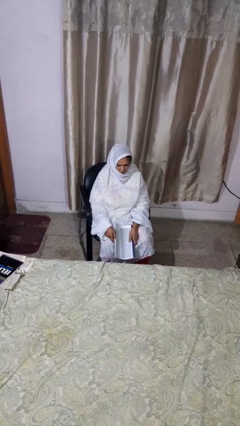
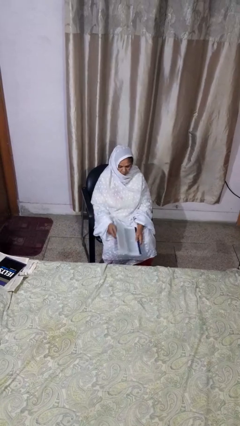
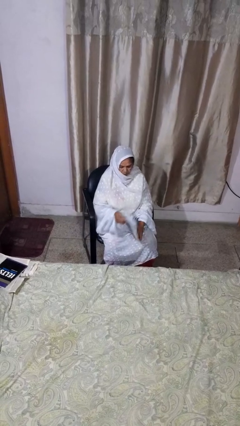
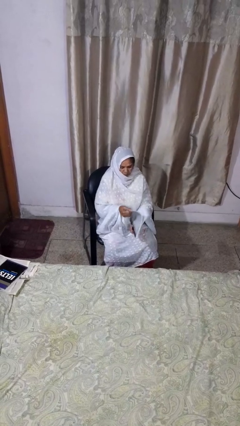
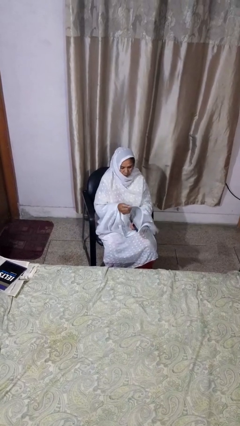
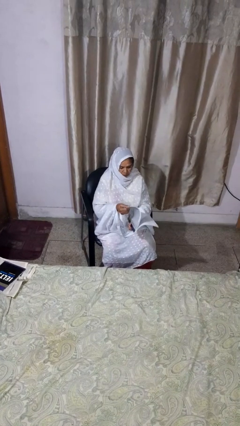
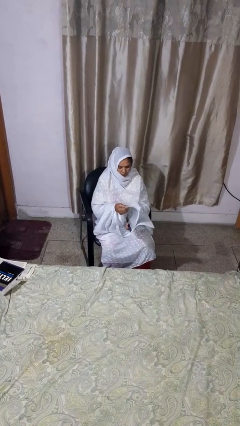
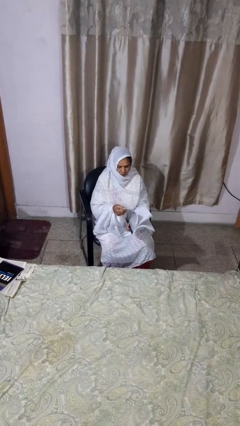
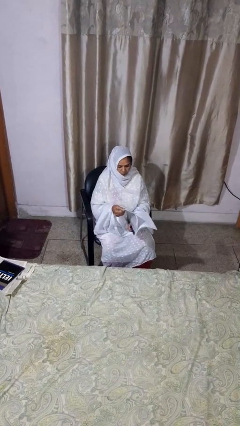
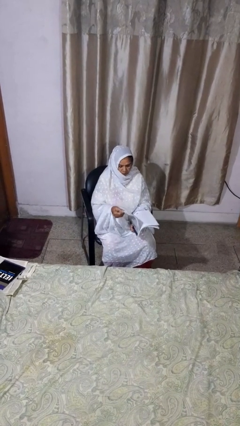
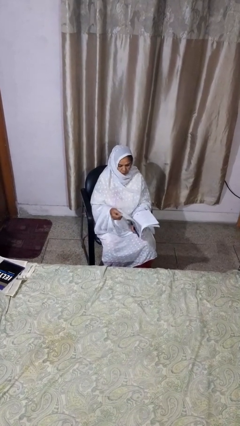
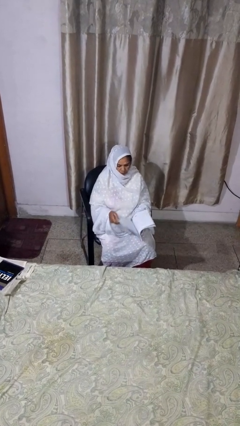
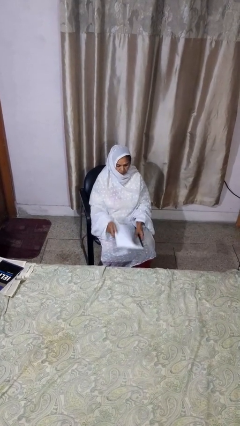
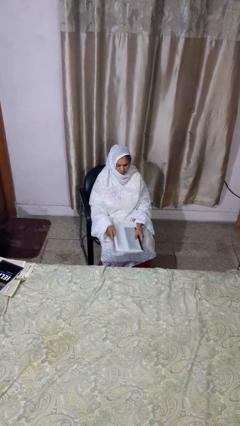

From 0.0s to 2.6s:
person reads magazine

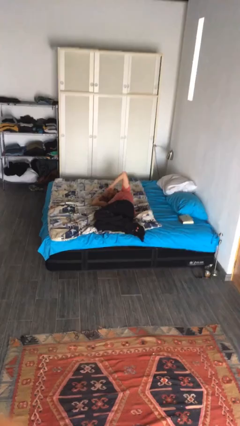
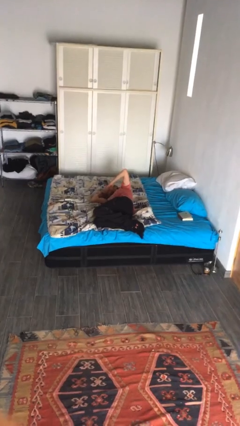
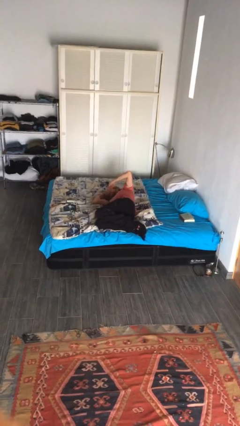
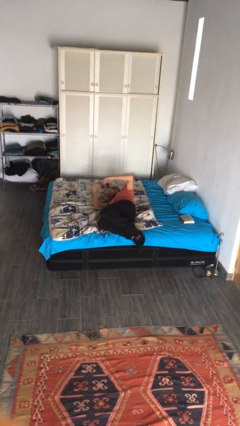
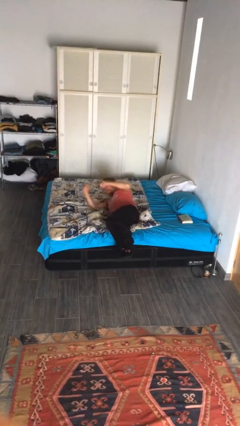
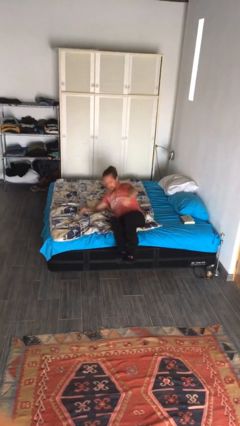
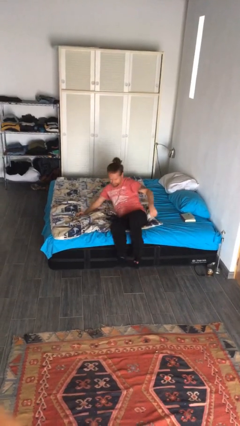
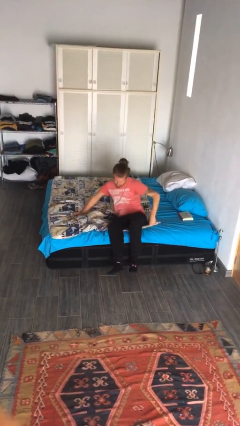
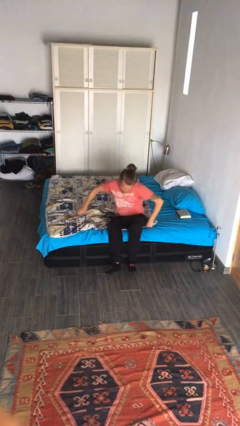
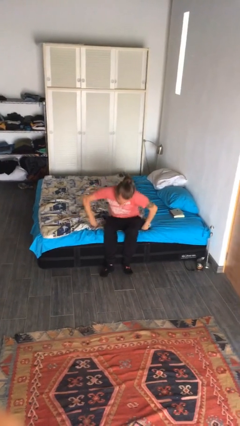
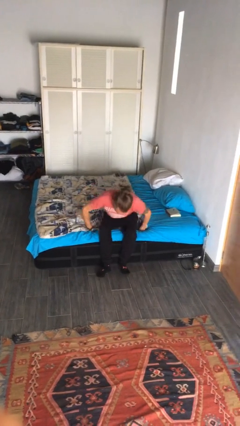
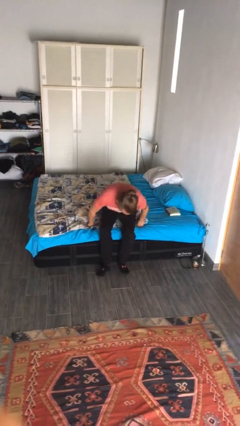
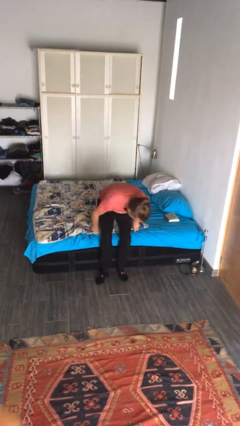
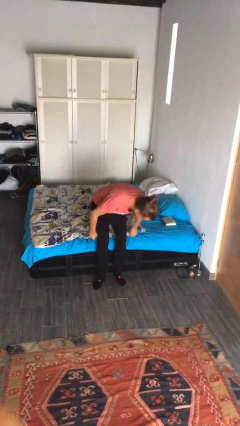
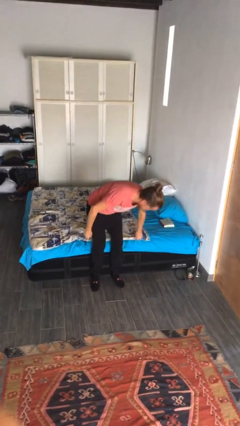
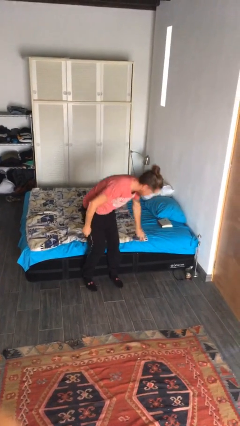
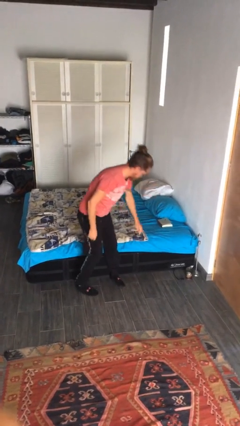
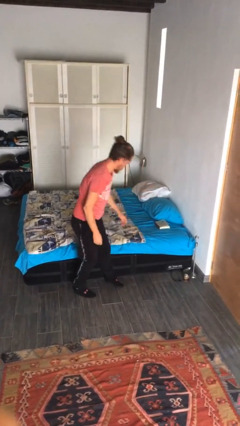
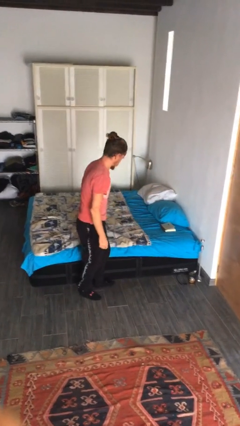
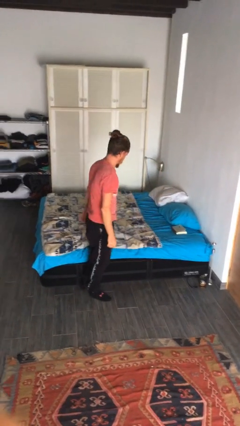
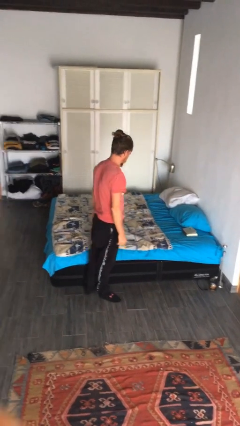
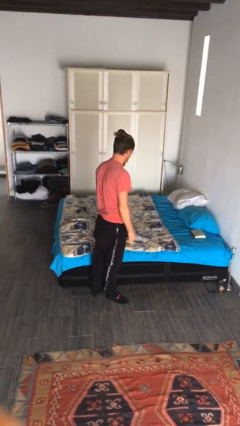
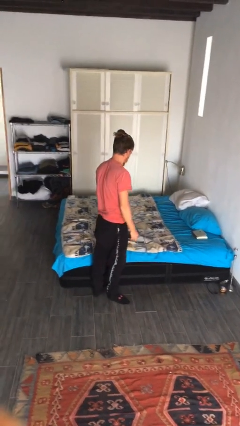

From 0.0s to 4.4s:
person stands up

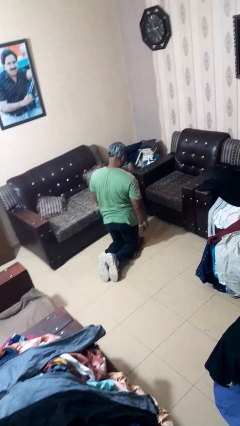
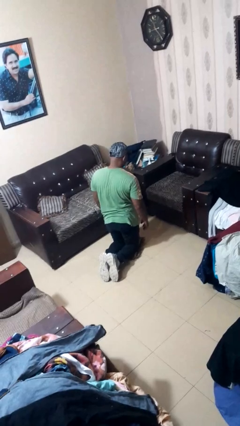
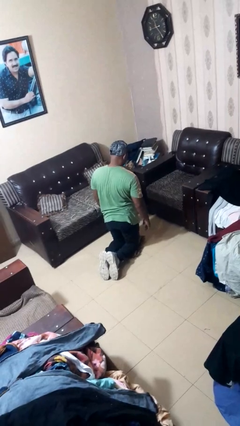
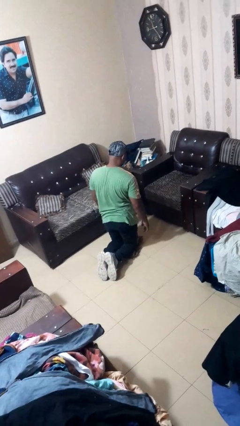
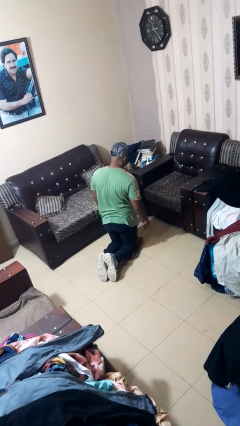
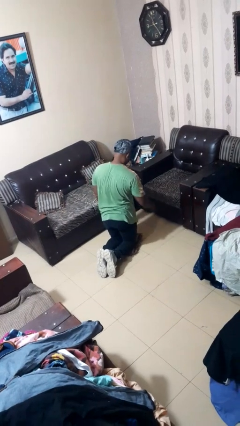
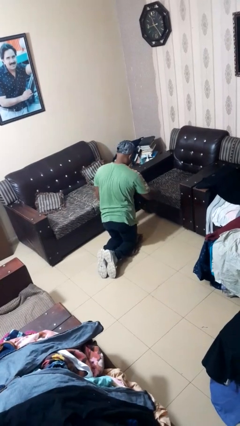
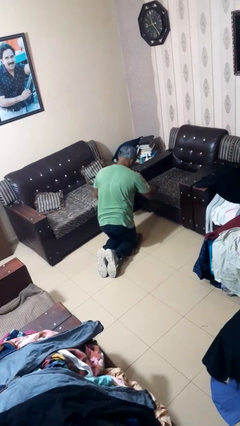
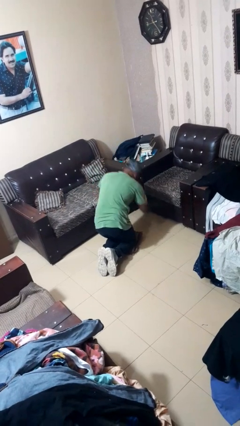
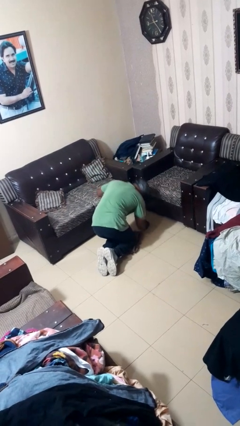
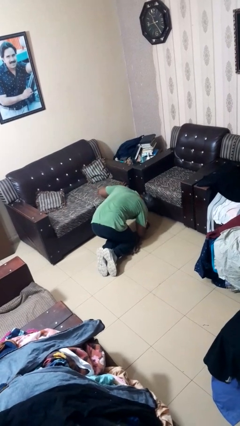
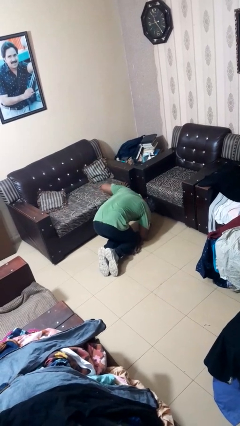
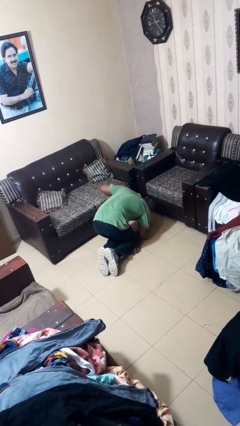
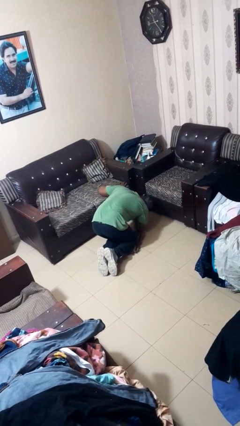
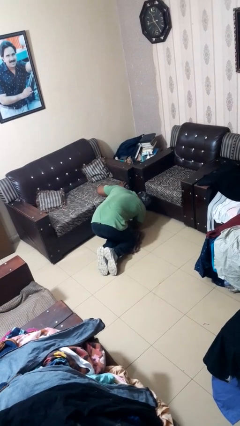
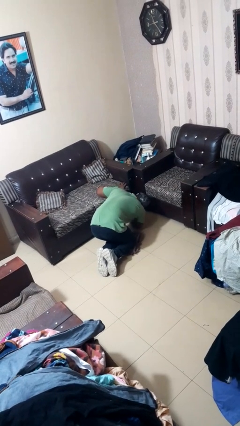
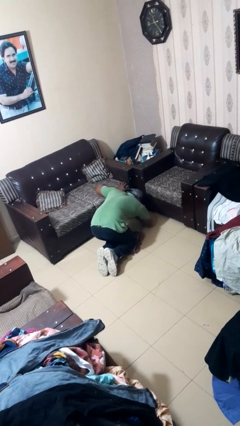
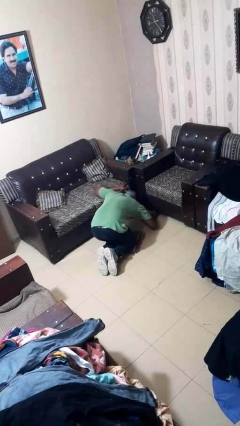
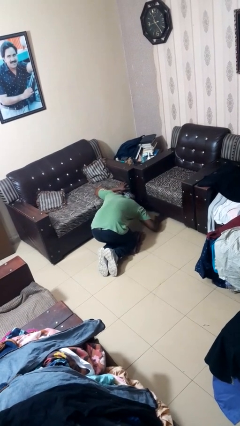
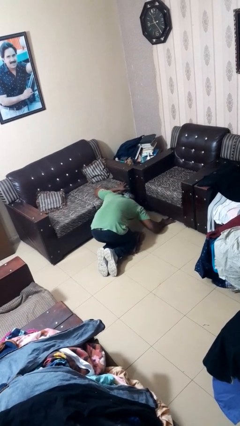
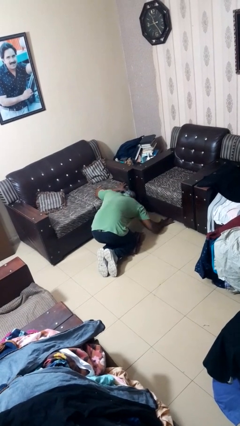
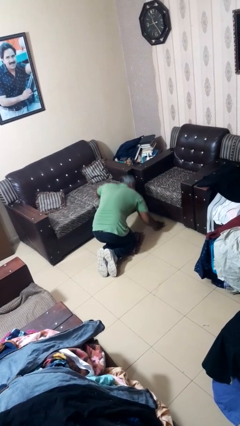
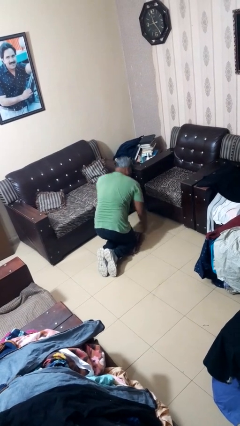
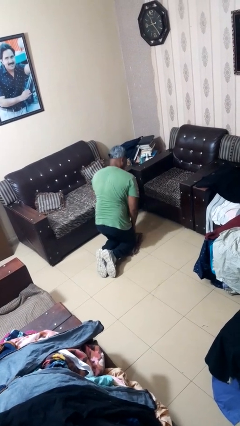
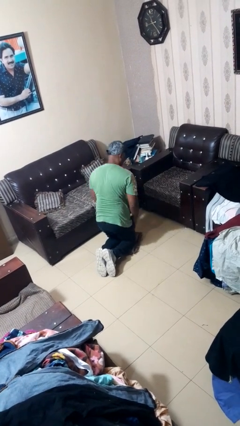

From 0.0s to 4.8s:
person searches under couch

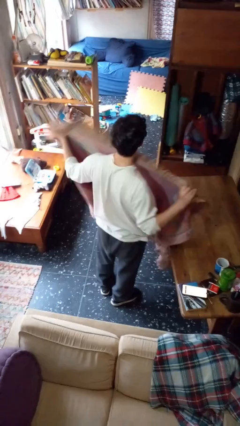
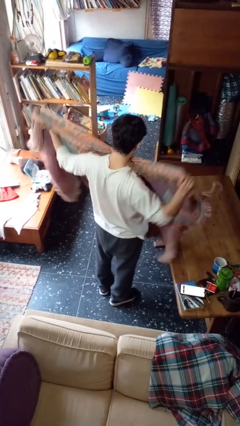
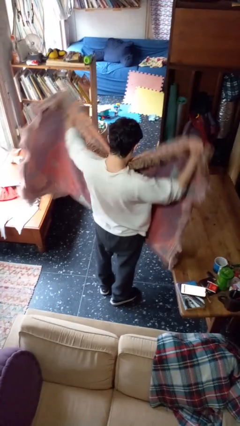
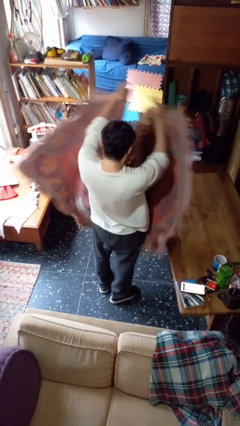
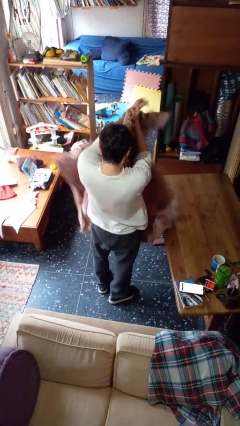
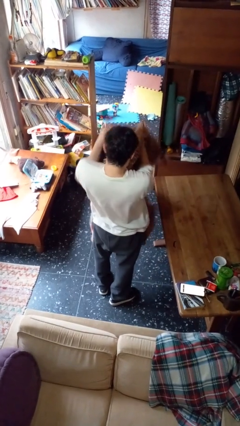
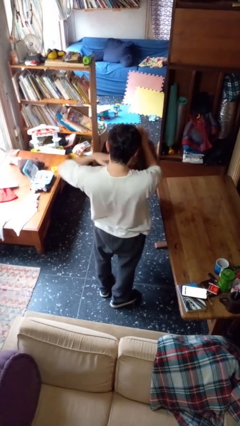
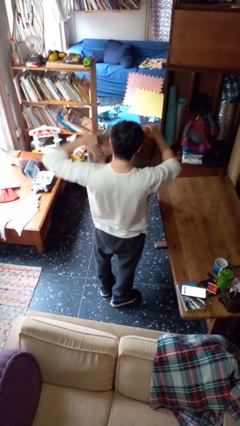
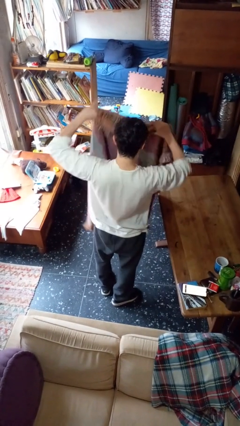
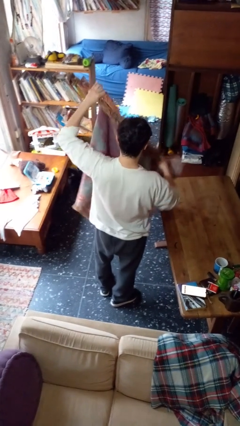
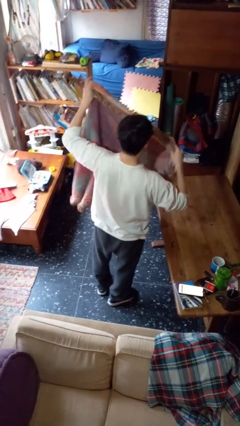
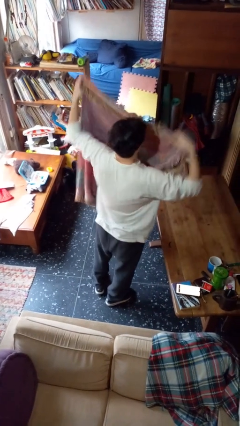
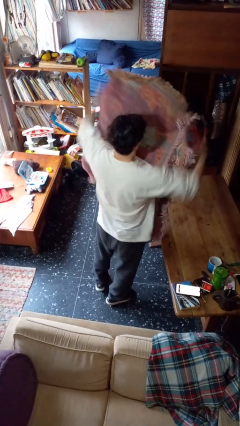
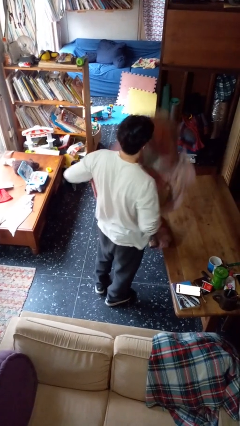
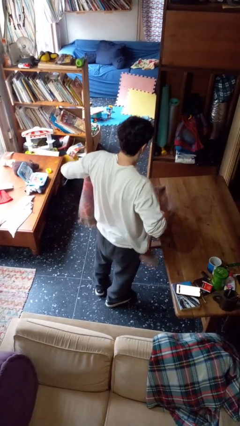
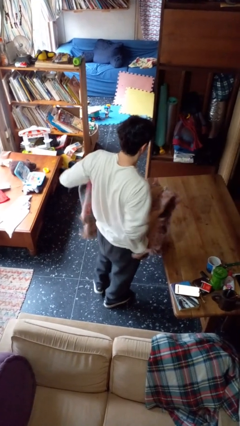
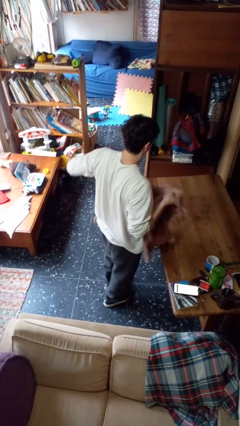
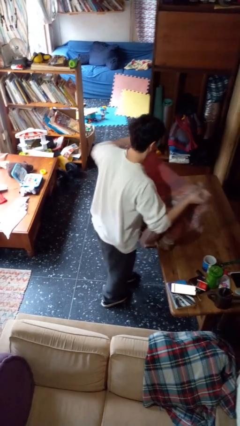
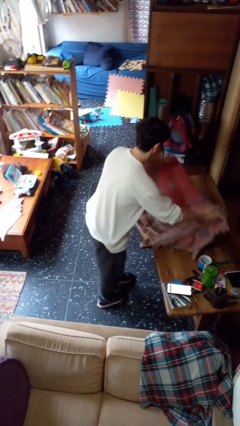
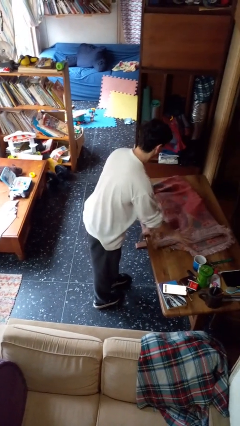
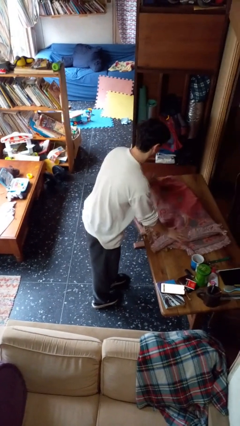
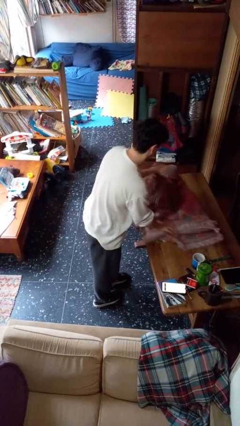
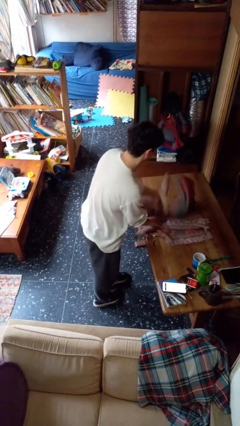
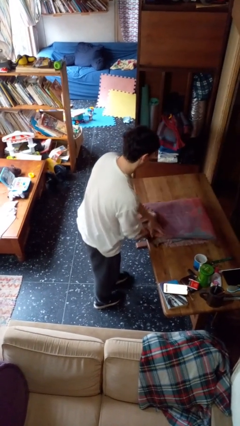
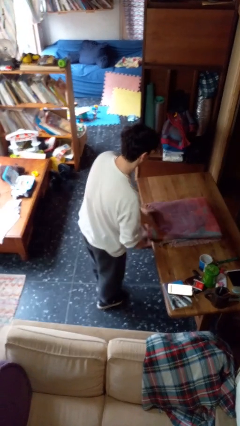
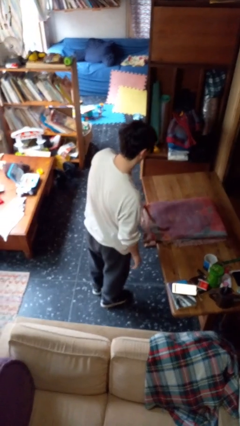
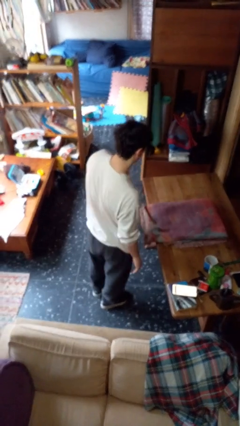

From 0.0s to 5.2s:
person folds blanket

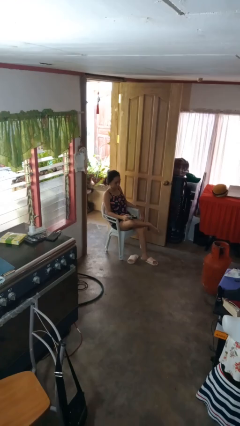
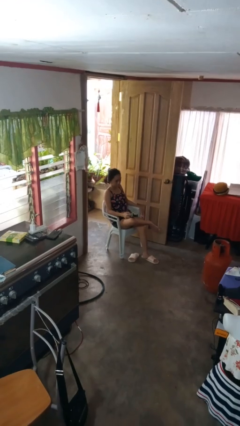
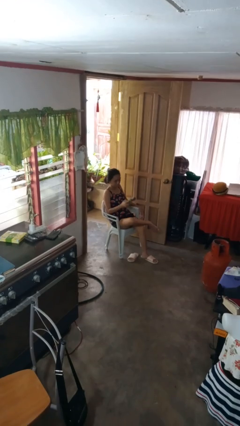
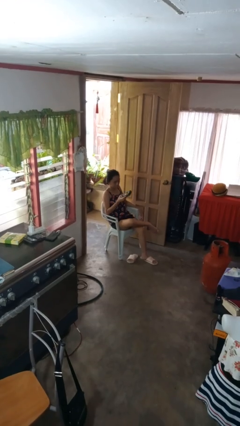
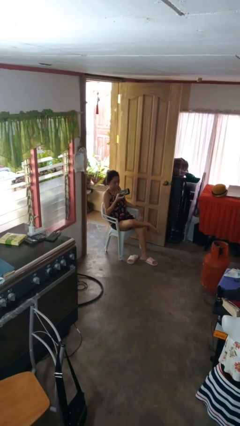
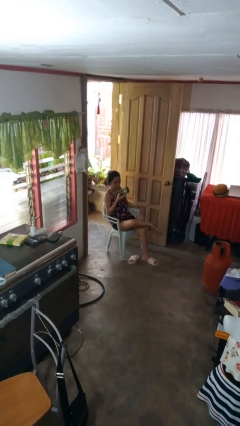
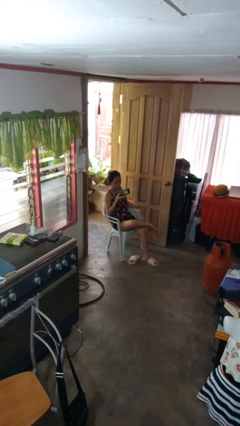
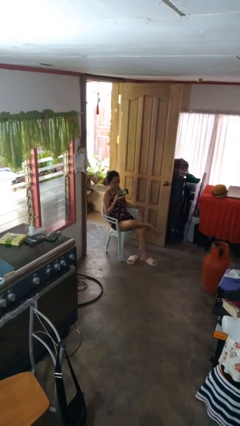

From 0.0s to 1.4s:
person uses television remote
